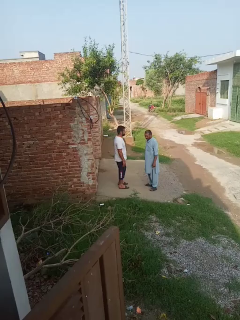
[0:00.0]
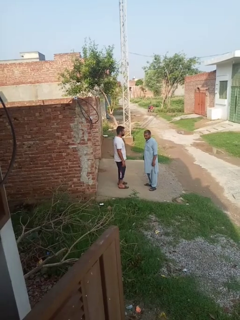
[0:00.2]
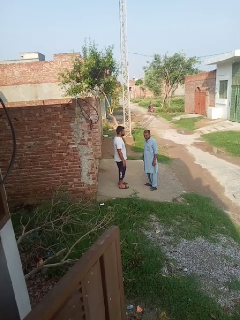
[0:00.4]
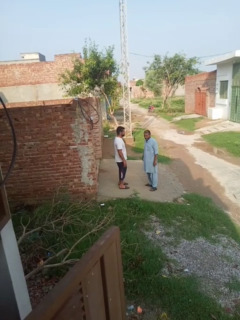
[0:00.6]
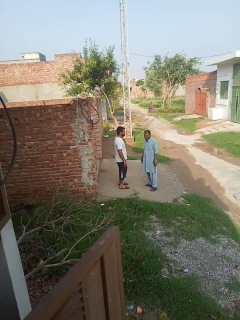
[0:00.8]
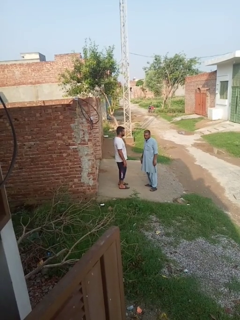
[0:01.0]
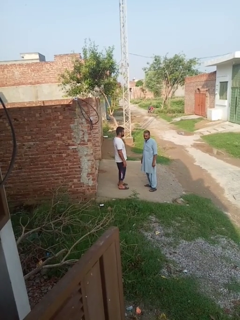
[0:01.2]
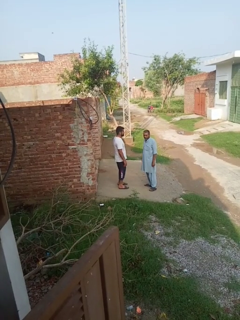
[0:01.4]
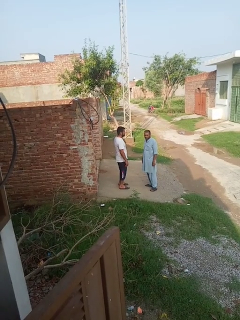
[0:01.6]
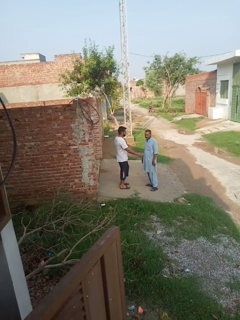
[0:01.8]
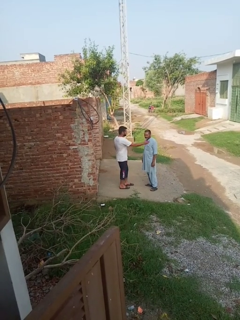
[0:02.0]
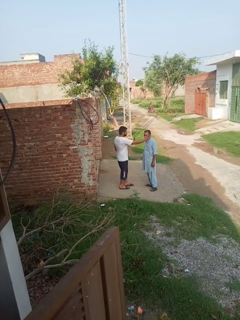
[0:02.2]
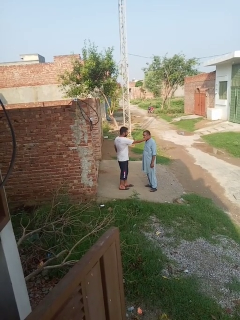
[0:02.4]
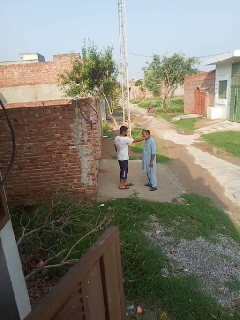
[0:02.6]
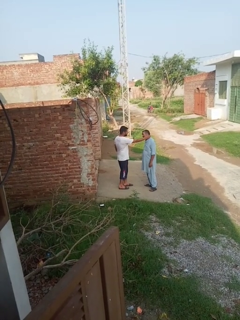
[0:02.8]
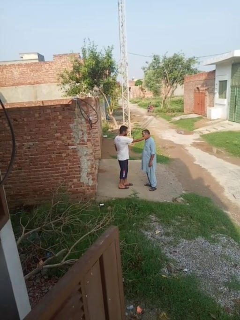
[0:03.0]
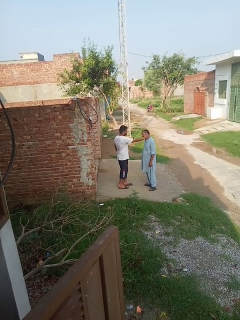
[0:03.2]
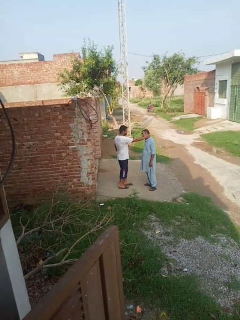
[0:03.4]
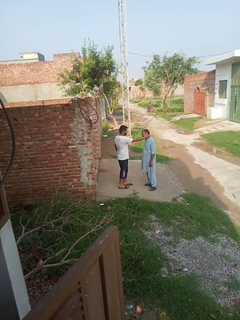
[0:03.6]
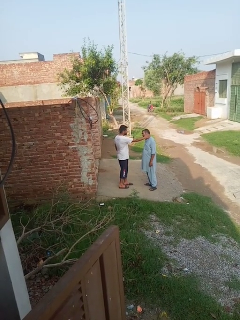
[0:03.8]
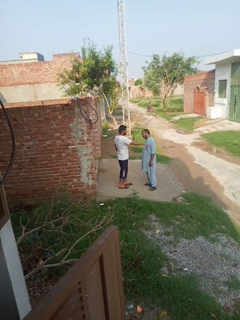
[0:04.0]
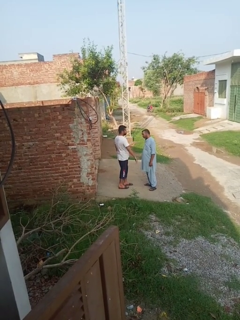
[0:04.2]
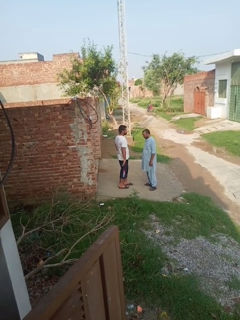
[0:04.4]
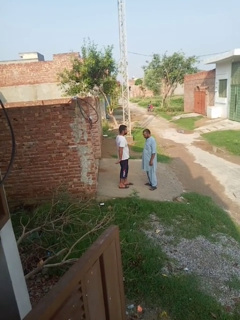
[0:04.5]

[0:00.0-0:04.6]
person touches face of person

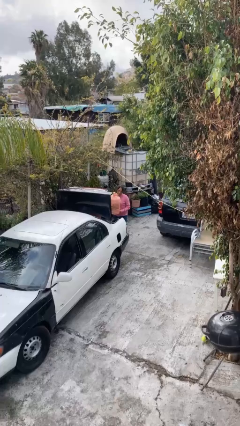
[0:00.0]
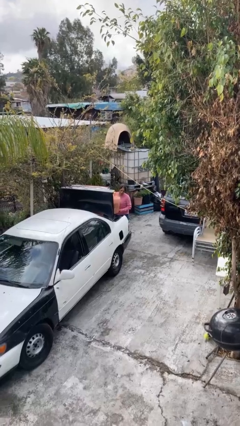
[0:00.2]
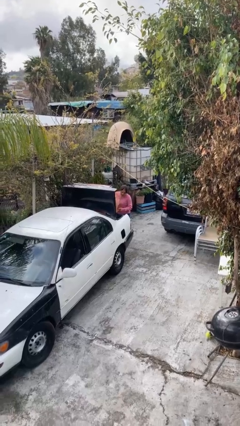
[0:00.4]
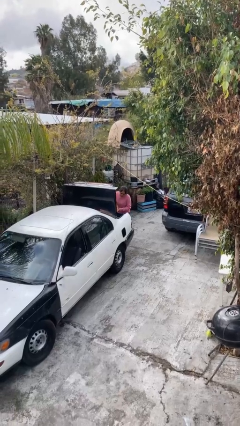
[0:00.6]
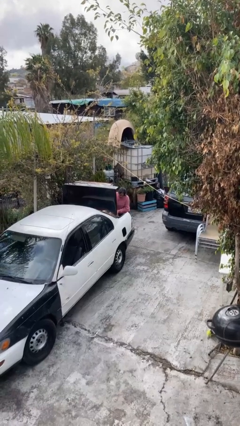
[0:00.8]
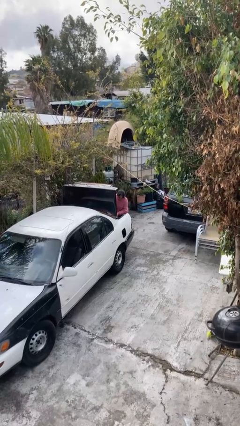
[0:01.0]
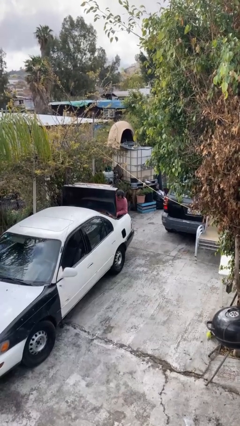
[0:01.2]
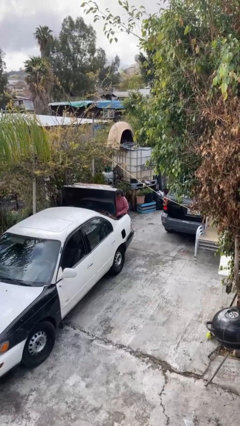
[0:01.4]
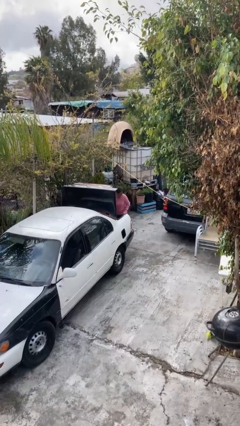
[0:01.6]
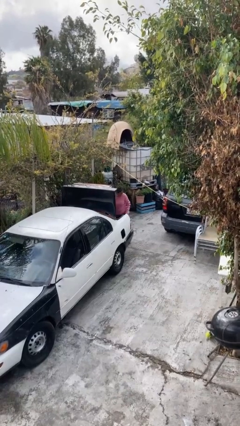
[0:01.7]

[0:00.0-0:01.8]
person loads car

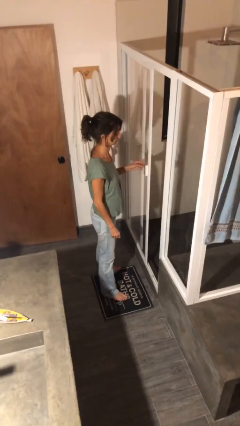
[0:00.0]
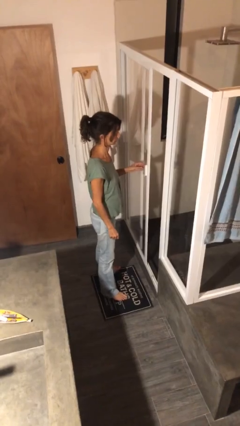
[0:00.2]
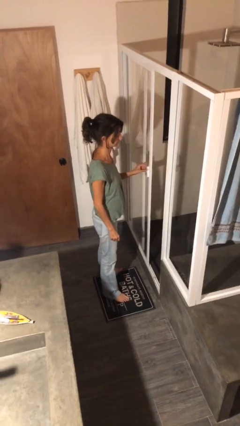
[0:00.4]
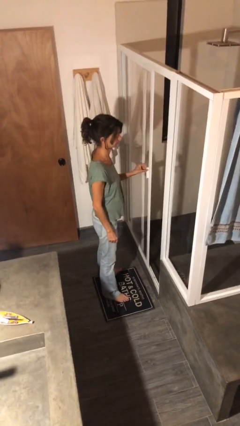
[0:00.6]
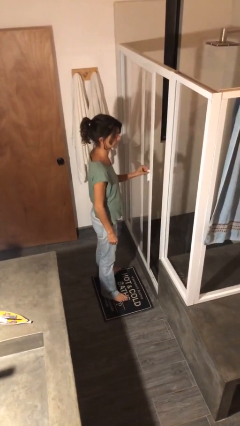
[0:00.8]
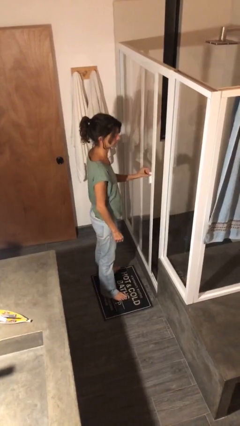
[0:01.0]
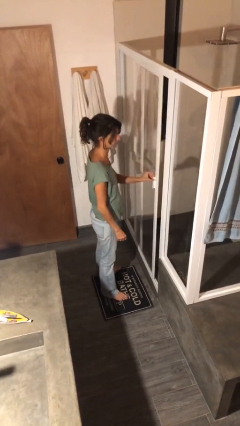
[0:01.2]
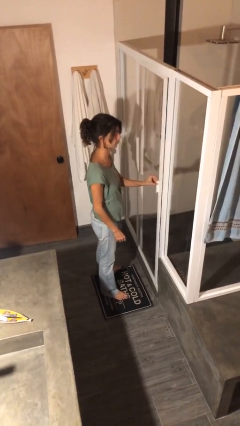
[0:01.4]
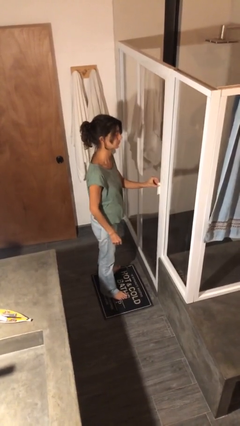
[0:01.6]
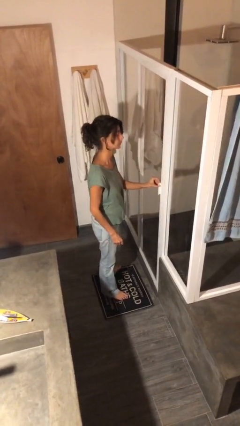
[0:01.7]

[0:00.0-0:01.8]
person closes sliding door

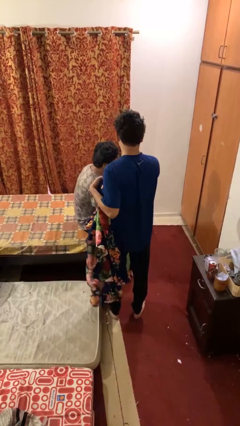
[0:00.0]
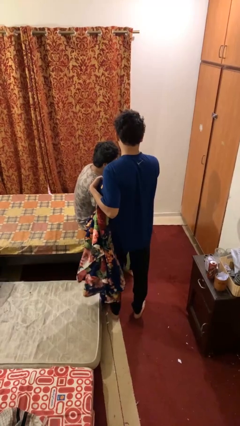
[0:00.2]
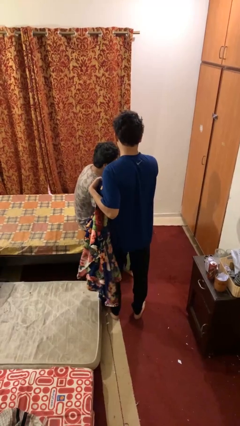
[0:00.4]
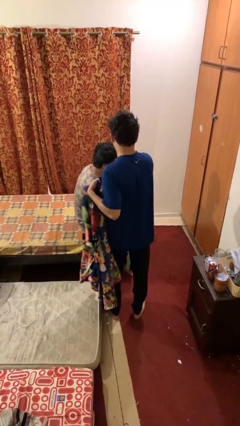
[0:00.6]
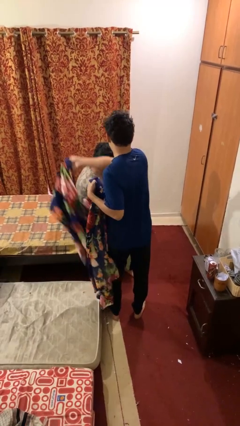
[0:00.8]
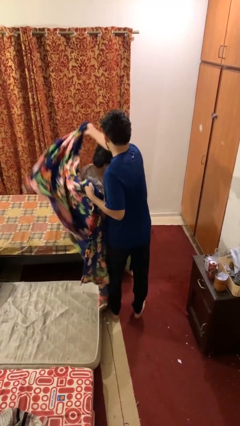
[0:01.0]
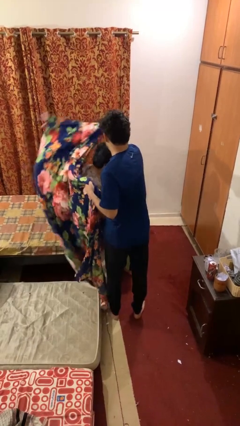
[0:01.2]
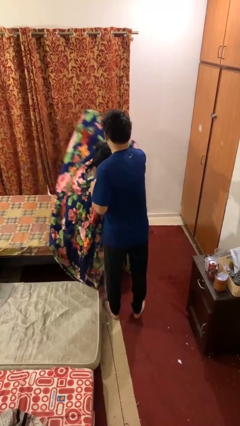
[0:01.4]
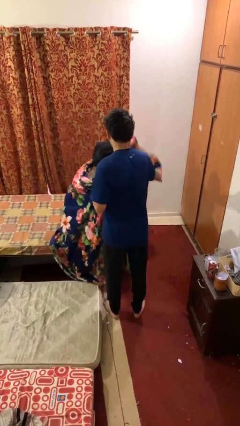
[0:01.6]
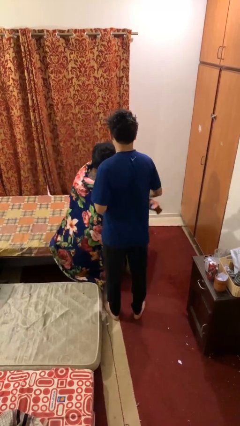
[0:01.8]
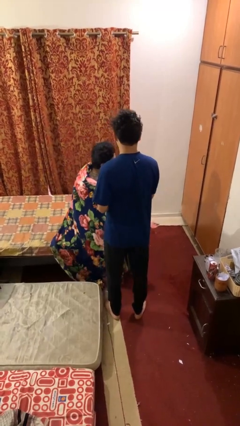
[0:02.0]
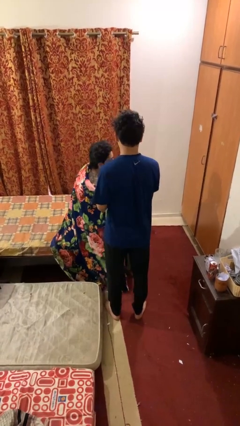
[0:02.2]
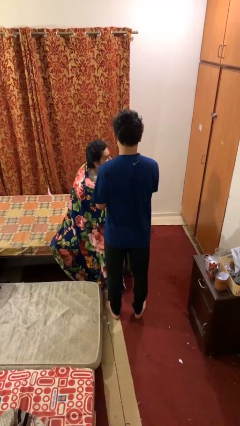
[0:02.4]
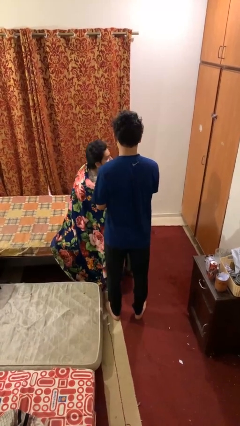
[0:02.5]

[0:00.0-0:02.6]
person covers friend with blanket

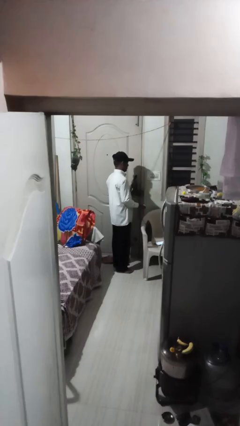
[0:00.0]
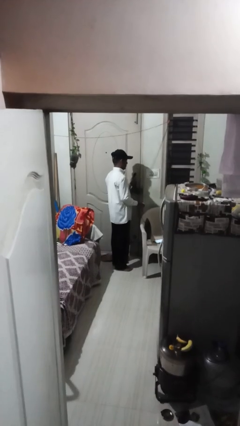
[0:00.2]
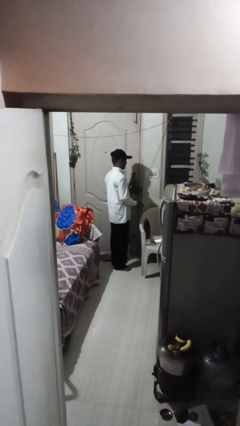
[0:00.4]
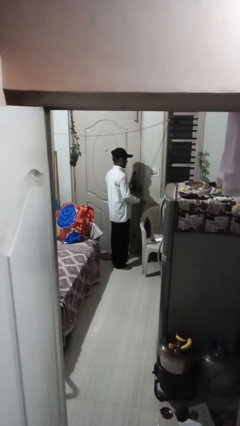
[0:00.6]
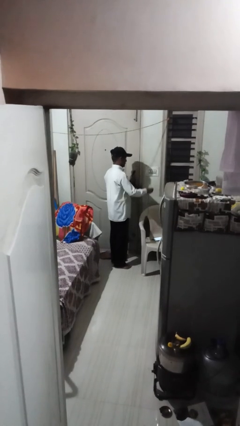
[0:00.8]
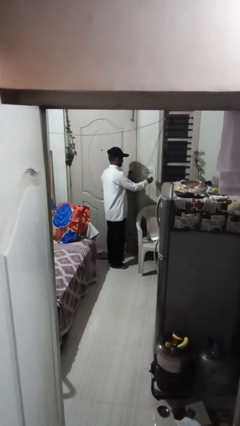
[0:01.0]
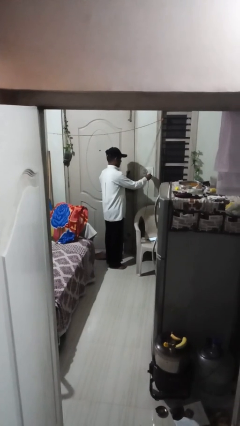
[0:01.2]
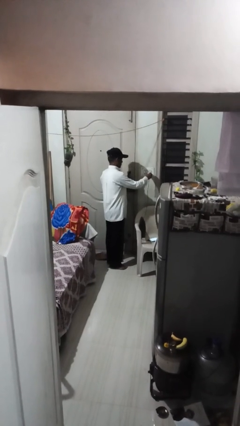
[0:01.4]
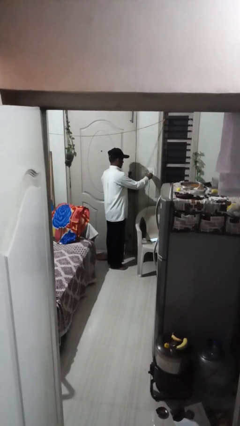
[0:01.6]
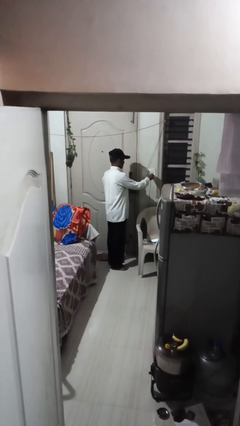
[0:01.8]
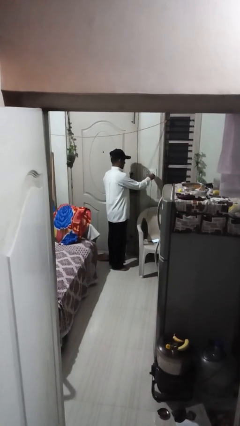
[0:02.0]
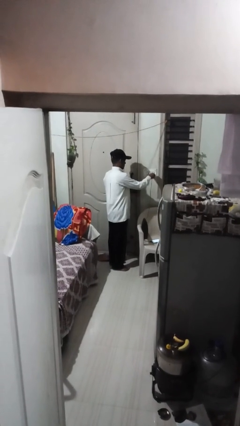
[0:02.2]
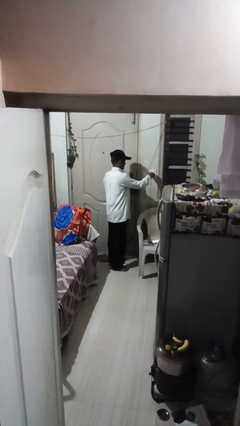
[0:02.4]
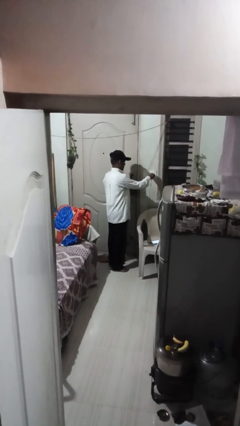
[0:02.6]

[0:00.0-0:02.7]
person plugs into electrical socket

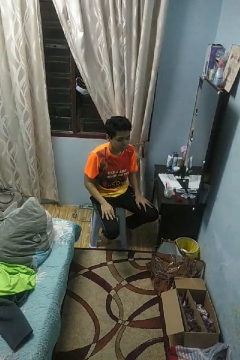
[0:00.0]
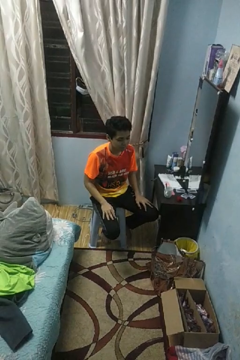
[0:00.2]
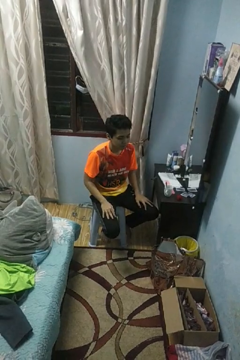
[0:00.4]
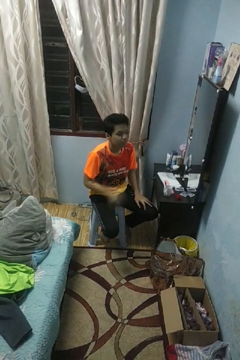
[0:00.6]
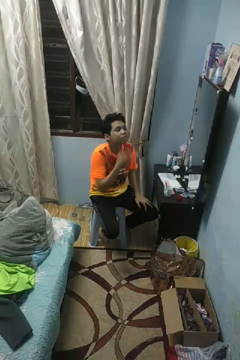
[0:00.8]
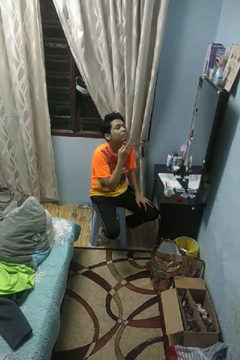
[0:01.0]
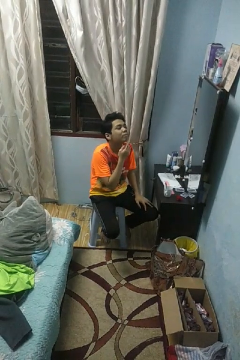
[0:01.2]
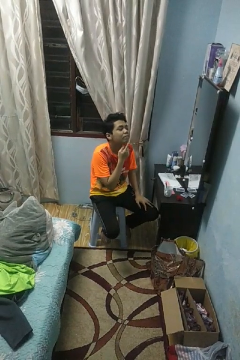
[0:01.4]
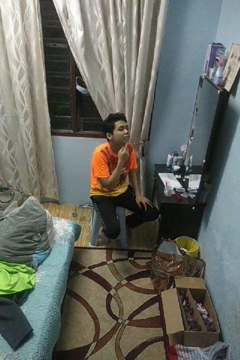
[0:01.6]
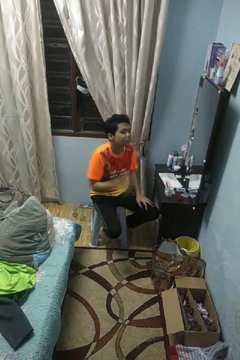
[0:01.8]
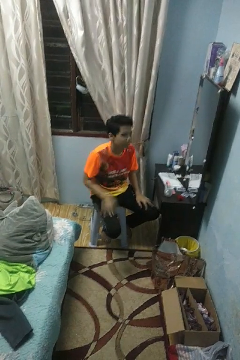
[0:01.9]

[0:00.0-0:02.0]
person strokes chin

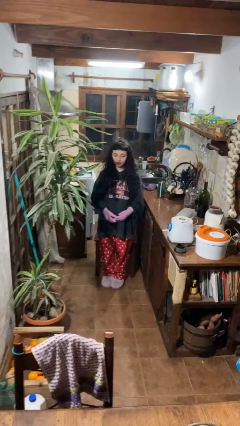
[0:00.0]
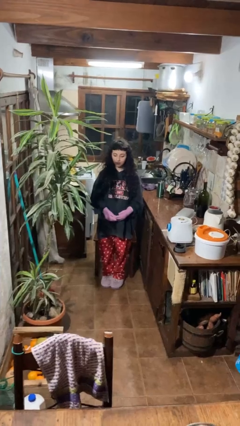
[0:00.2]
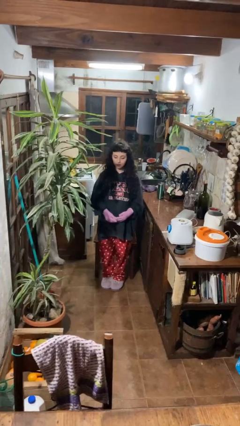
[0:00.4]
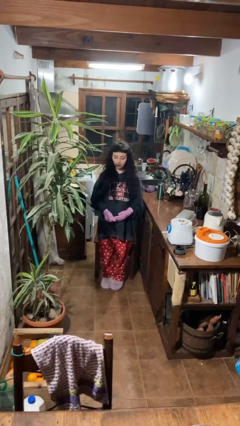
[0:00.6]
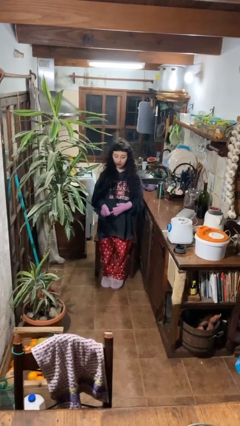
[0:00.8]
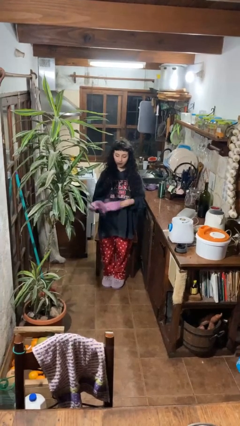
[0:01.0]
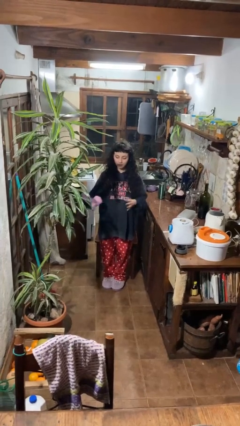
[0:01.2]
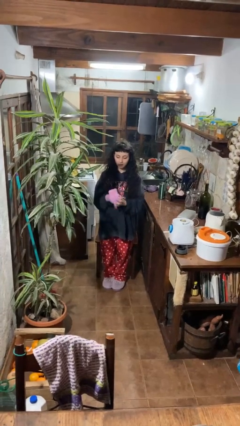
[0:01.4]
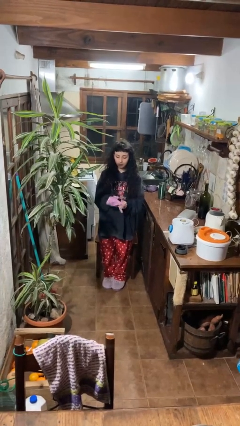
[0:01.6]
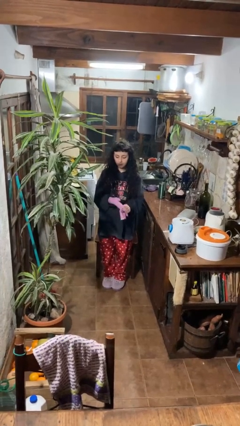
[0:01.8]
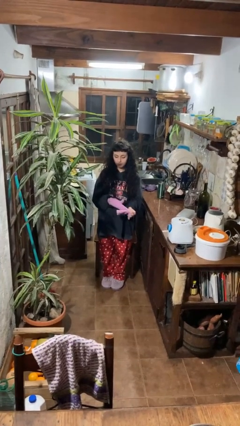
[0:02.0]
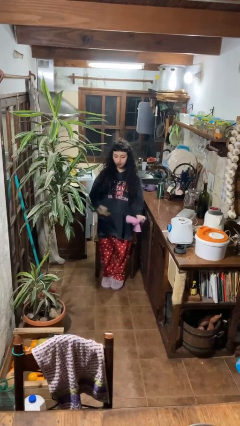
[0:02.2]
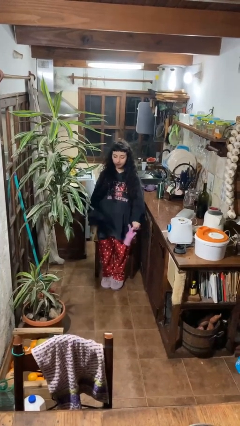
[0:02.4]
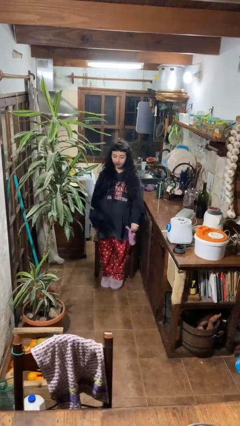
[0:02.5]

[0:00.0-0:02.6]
person takes off gloves

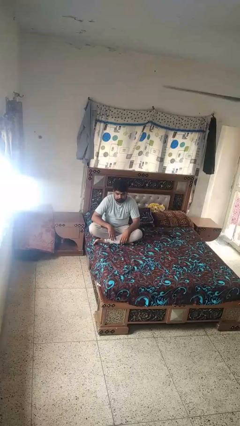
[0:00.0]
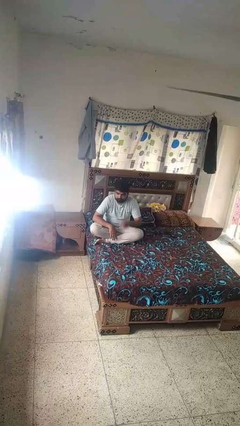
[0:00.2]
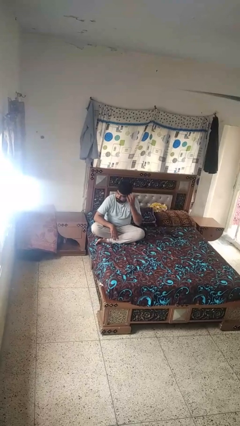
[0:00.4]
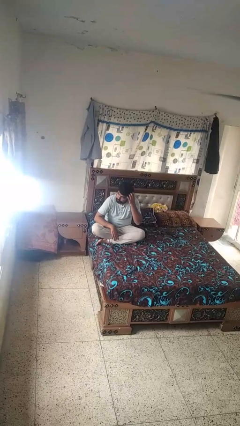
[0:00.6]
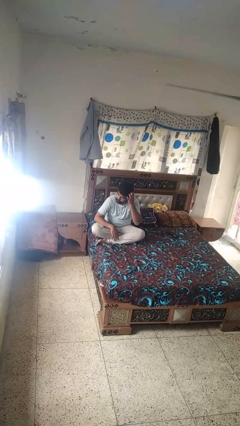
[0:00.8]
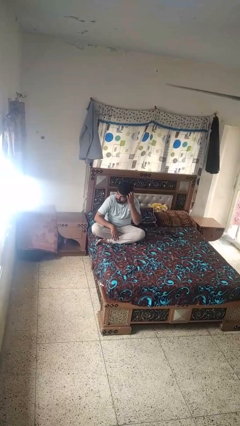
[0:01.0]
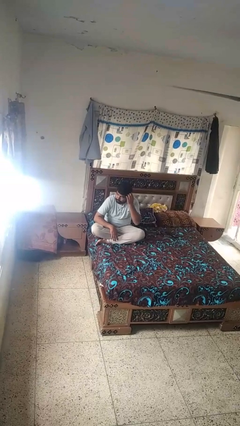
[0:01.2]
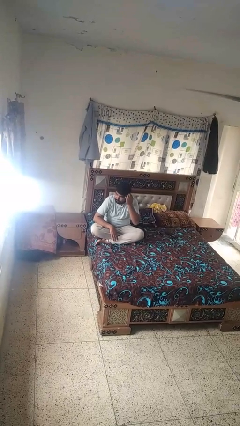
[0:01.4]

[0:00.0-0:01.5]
person scratches face
